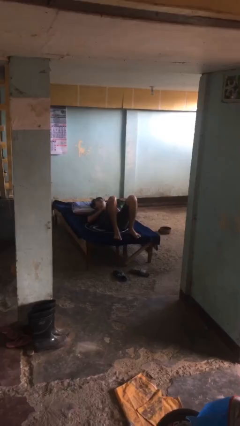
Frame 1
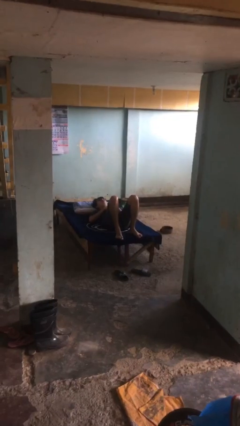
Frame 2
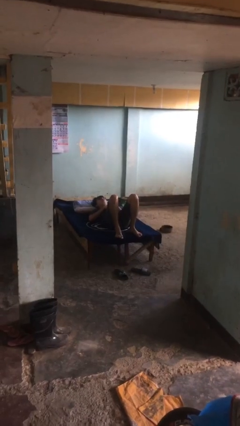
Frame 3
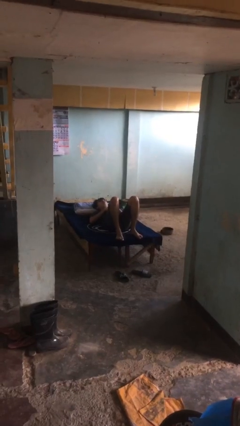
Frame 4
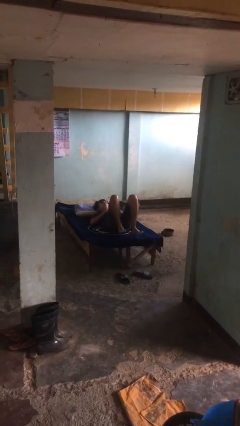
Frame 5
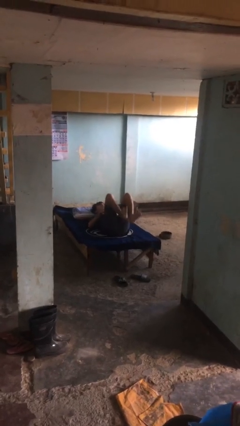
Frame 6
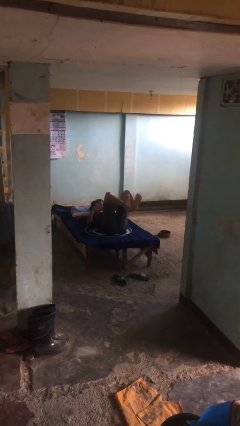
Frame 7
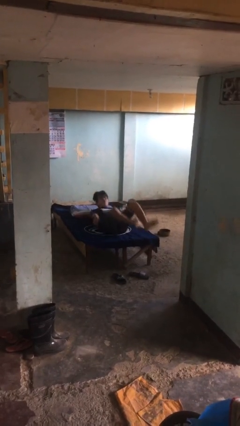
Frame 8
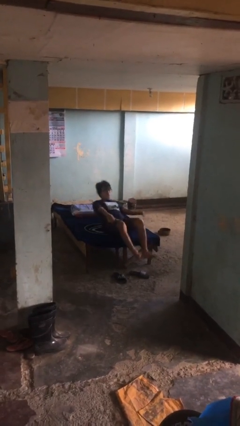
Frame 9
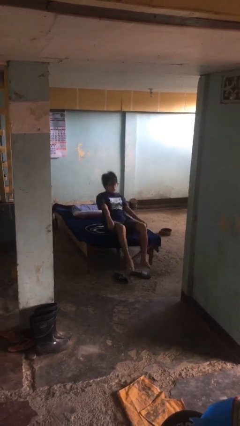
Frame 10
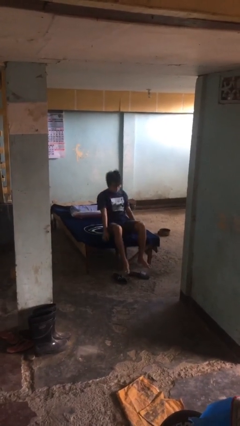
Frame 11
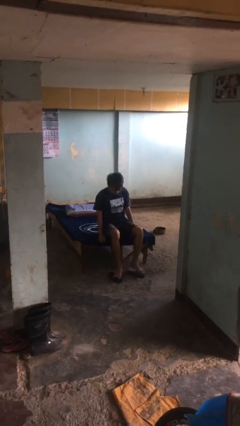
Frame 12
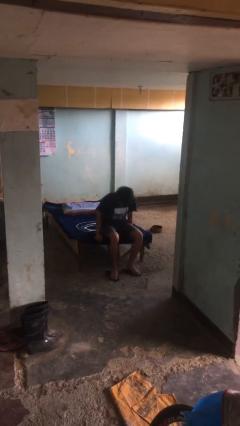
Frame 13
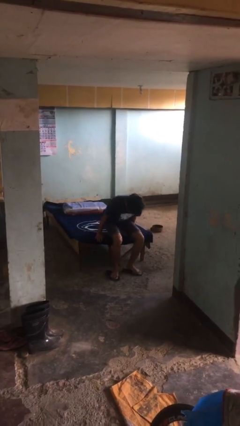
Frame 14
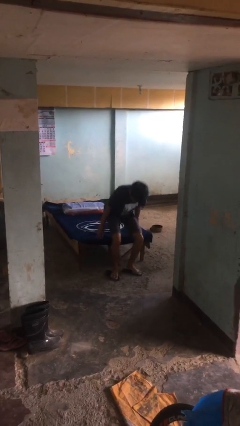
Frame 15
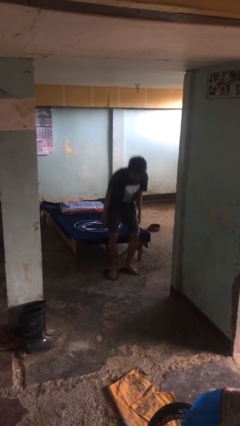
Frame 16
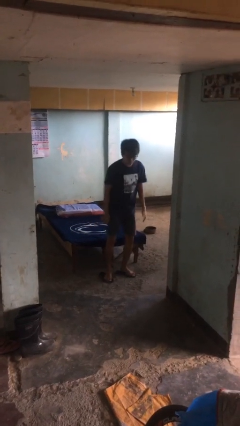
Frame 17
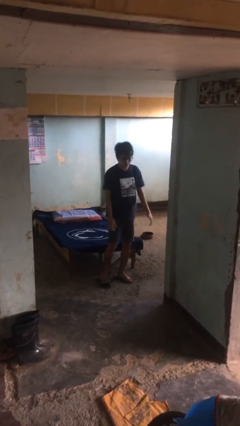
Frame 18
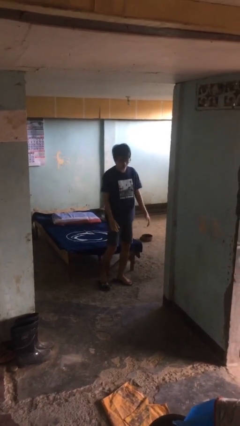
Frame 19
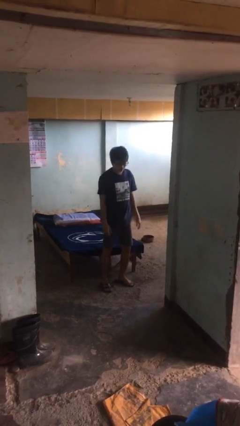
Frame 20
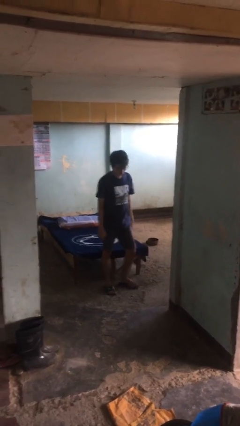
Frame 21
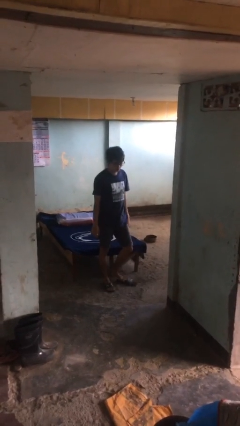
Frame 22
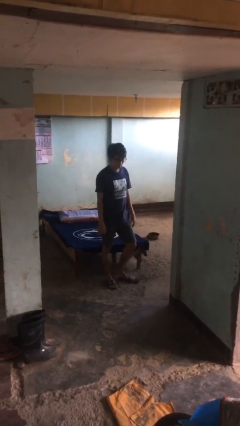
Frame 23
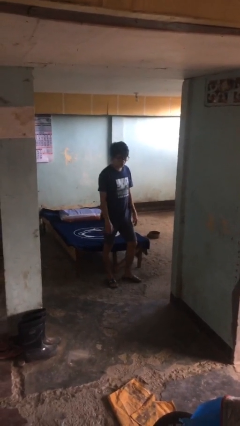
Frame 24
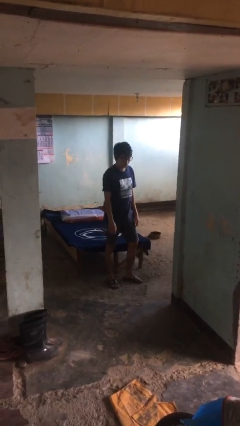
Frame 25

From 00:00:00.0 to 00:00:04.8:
person stands up

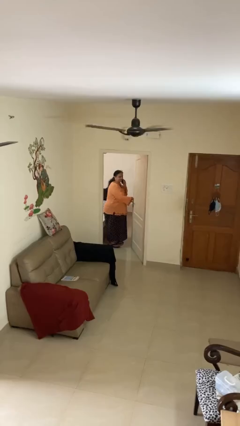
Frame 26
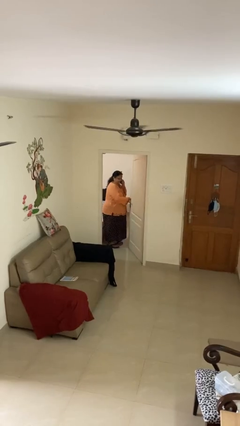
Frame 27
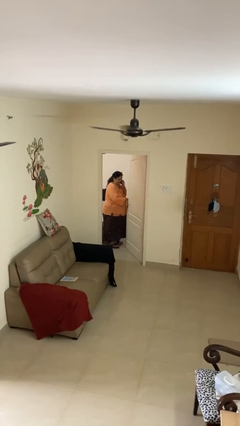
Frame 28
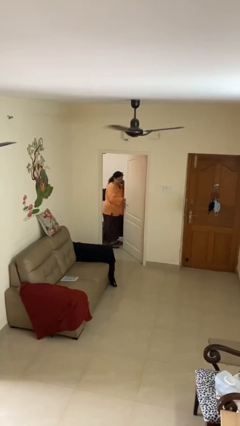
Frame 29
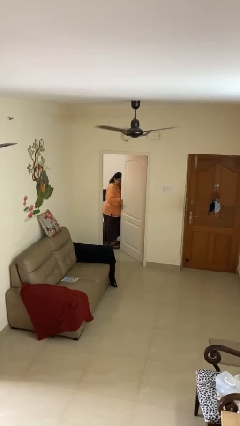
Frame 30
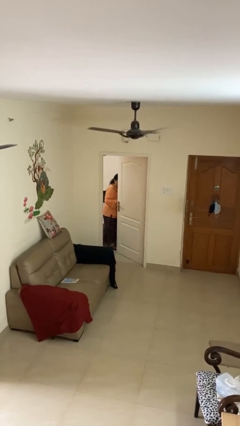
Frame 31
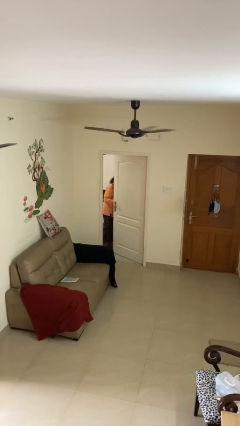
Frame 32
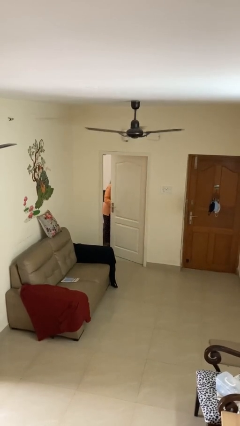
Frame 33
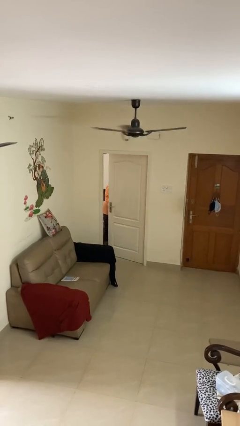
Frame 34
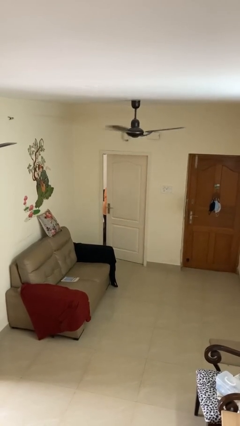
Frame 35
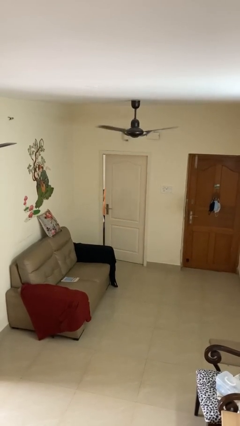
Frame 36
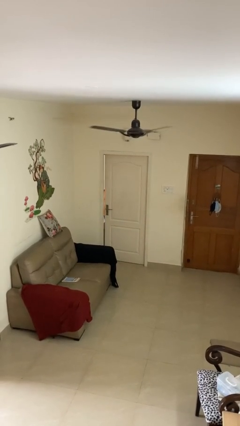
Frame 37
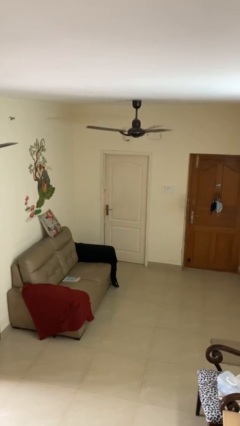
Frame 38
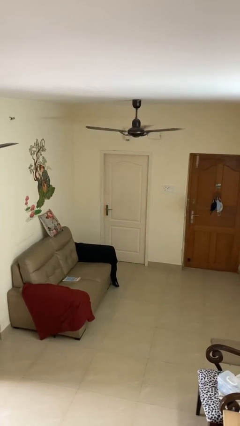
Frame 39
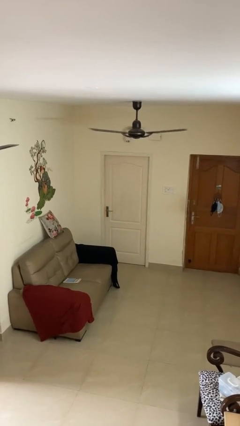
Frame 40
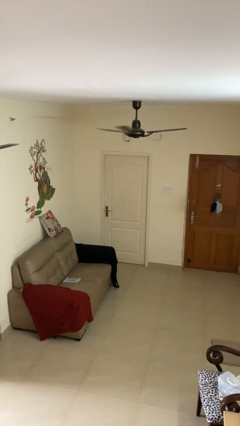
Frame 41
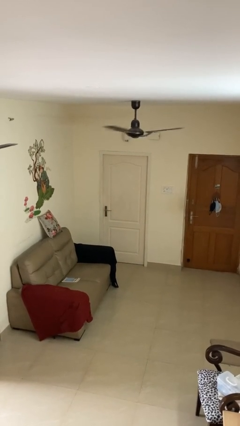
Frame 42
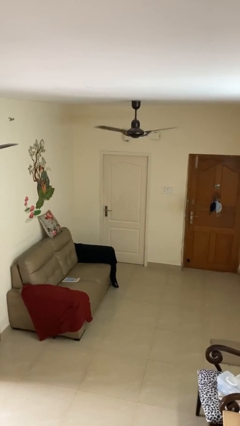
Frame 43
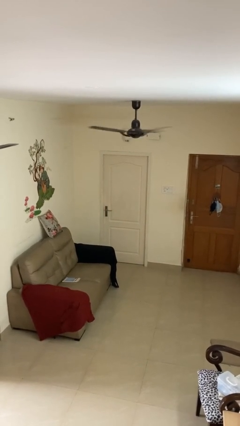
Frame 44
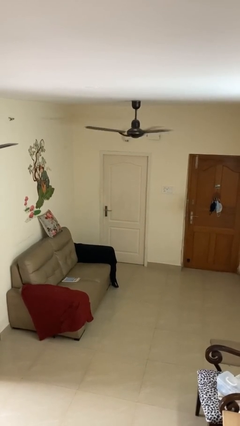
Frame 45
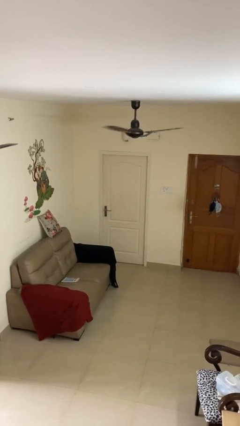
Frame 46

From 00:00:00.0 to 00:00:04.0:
person closes facility door

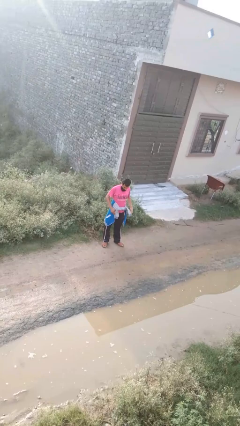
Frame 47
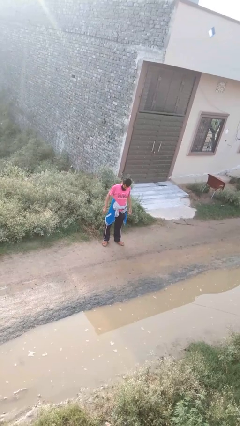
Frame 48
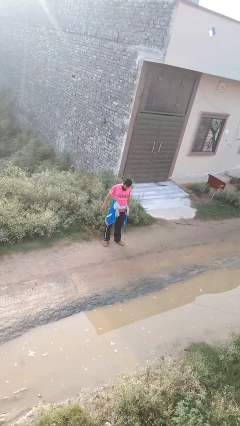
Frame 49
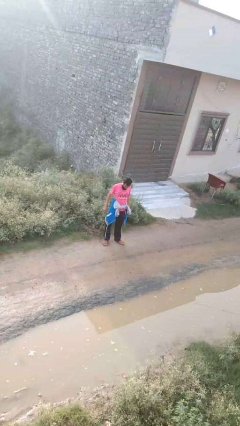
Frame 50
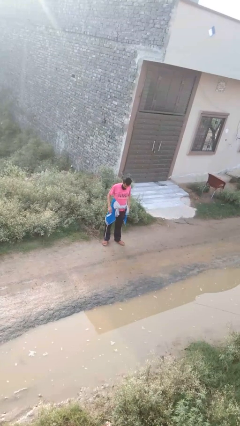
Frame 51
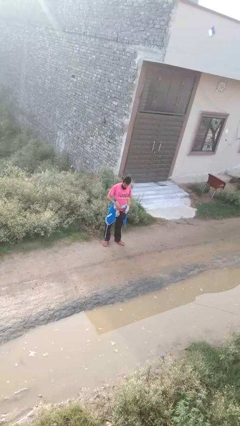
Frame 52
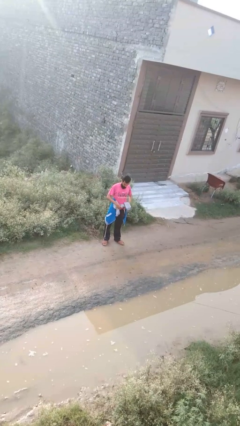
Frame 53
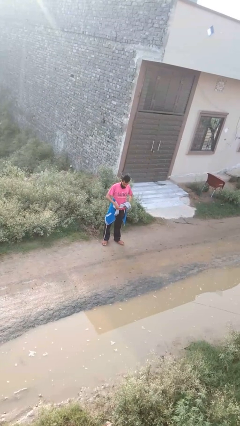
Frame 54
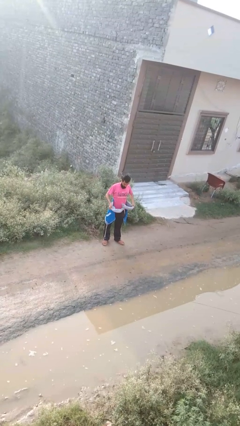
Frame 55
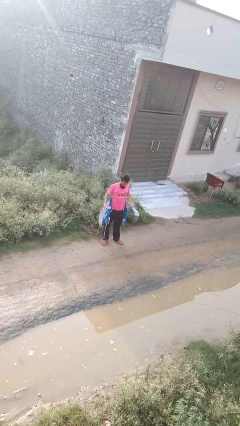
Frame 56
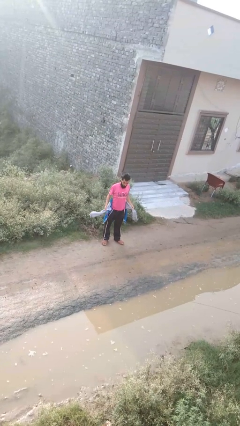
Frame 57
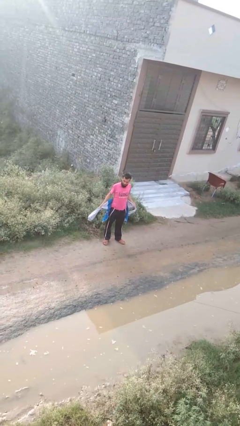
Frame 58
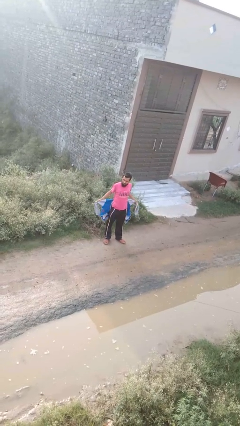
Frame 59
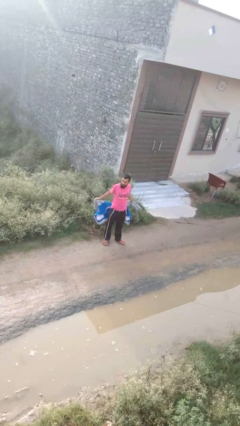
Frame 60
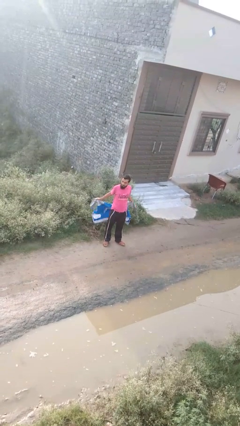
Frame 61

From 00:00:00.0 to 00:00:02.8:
person unties jacket around waist

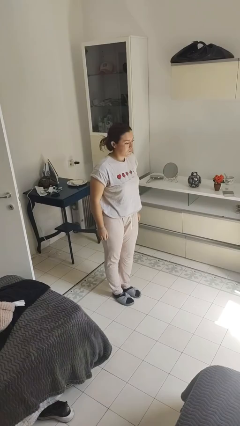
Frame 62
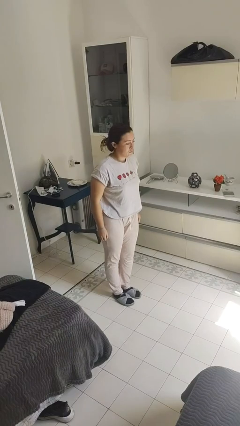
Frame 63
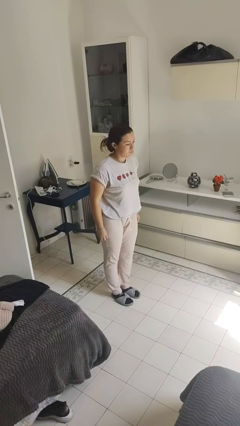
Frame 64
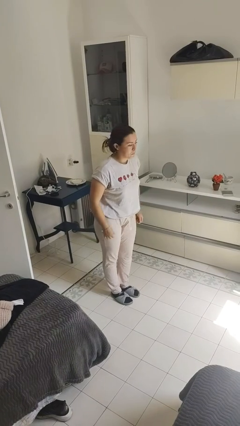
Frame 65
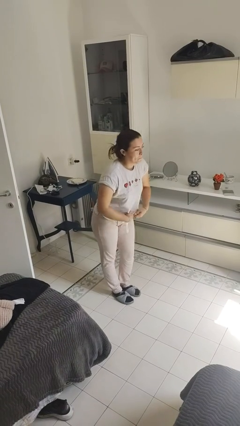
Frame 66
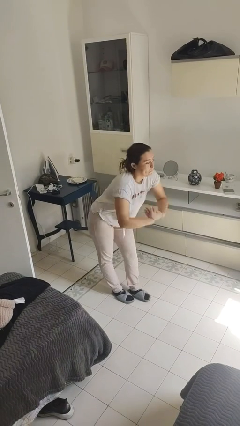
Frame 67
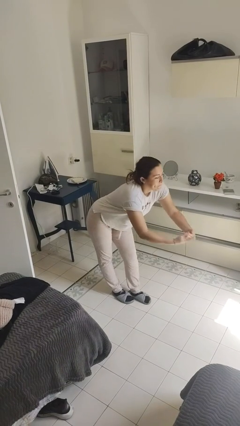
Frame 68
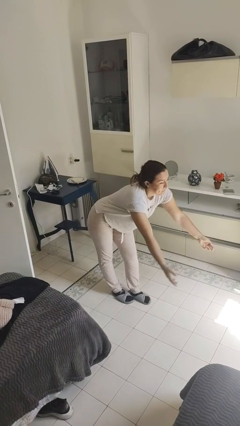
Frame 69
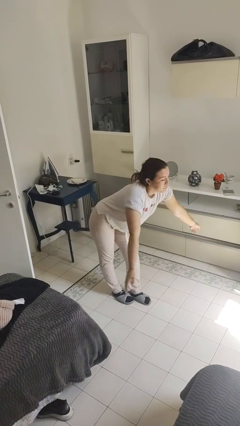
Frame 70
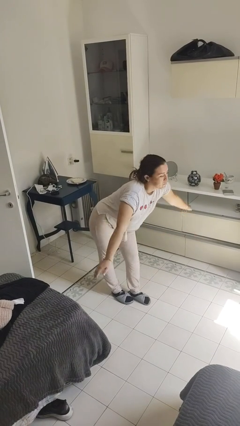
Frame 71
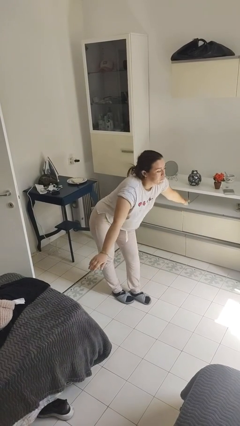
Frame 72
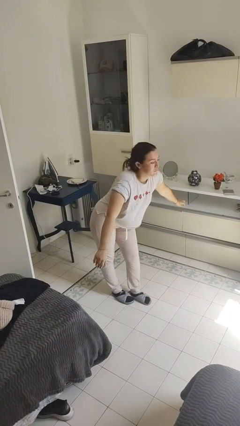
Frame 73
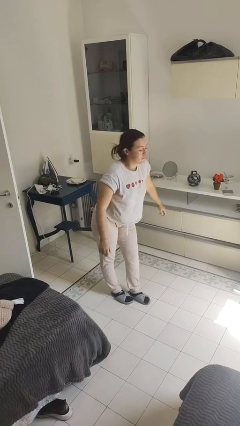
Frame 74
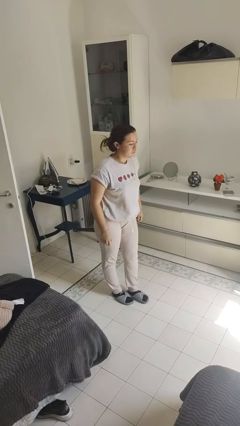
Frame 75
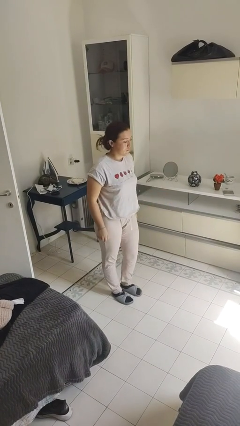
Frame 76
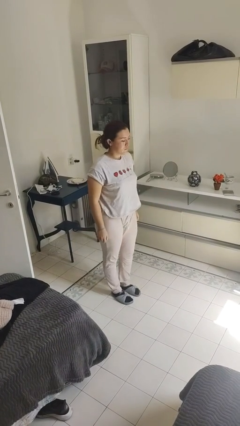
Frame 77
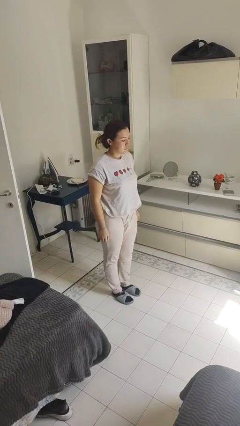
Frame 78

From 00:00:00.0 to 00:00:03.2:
person bows

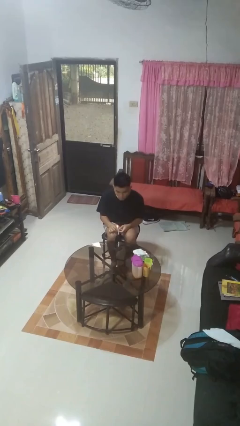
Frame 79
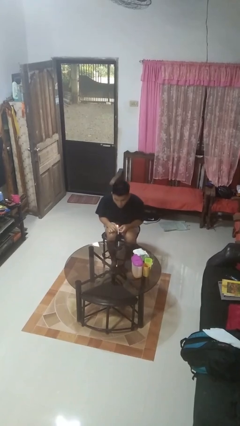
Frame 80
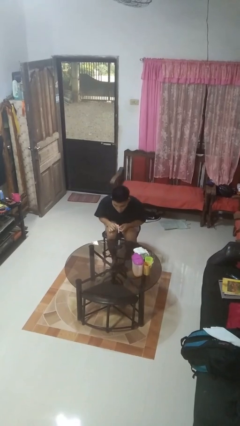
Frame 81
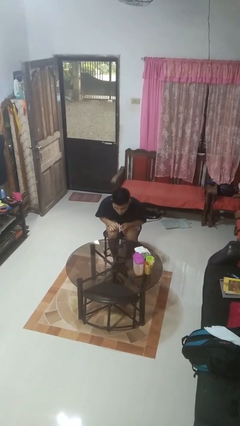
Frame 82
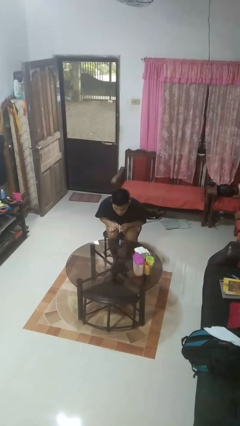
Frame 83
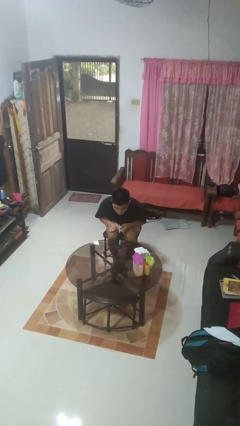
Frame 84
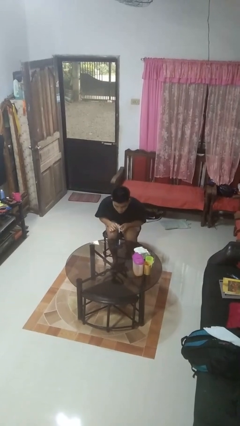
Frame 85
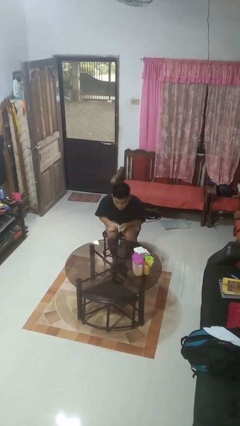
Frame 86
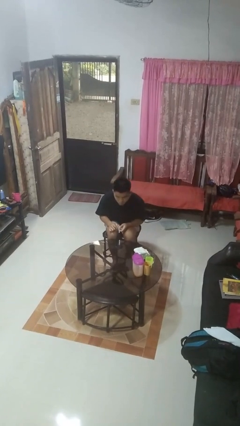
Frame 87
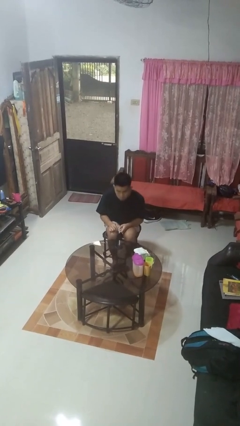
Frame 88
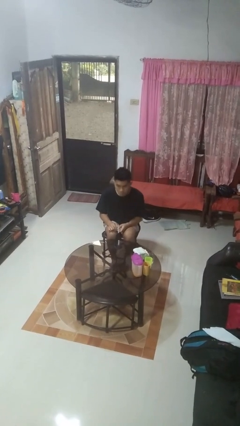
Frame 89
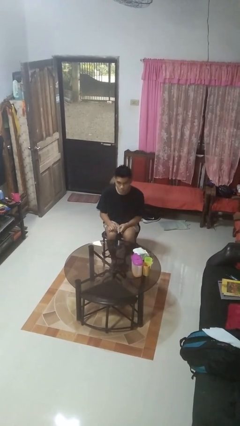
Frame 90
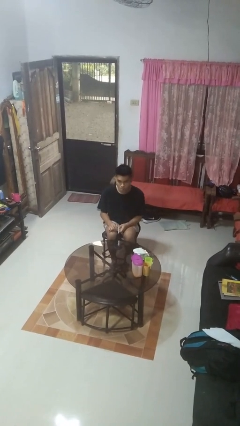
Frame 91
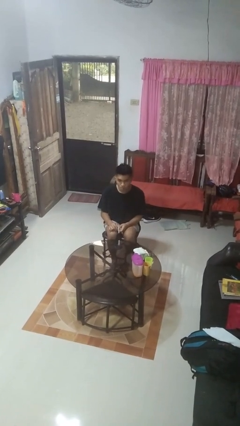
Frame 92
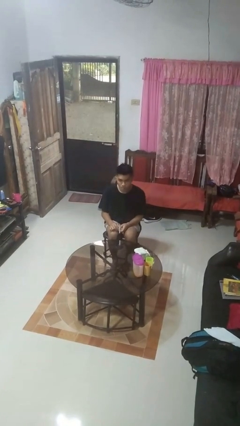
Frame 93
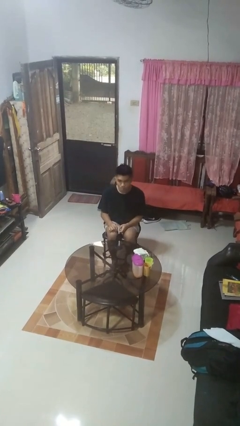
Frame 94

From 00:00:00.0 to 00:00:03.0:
person extinguishes candle
